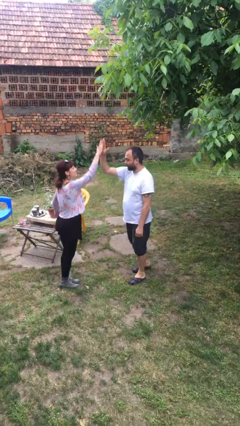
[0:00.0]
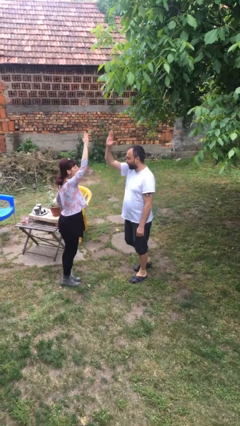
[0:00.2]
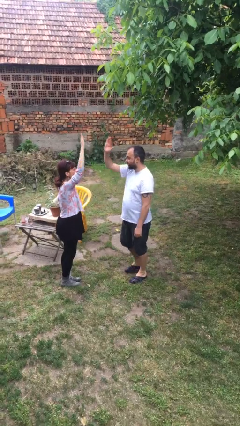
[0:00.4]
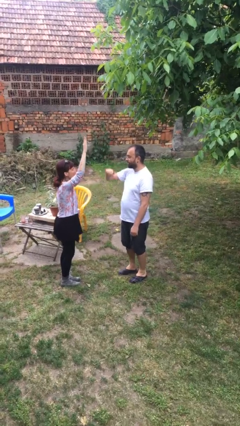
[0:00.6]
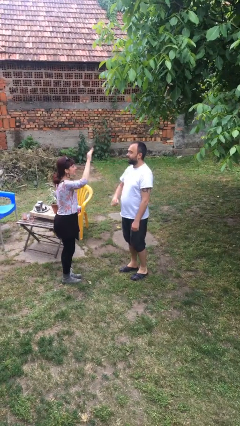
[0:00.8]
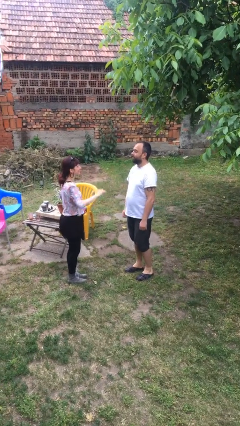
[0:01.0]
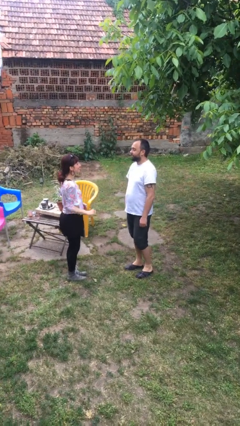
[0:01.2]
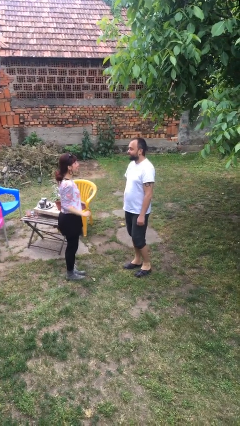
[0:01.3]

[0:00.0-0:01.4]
person highfives hand

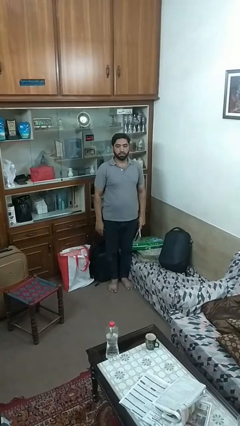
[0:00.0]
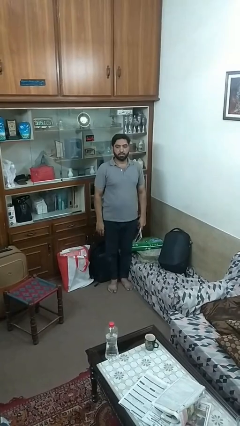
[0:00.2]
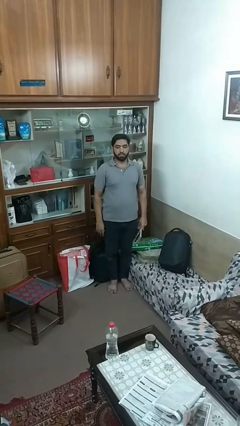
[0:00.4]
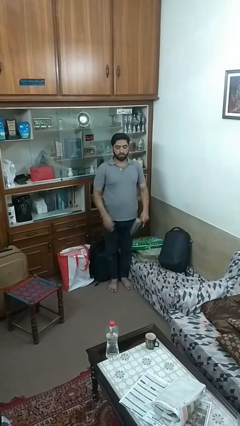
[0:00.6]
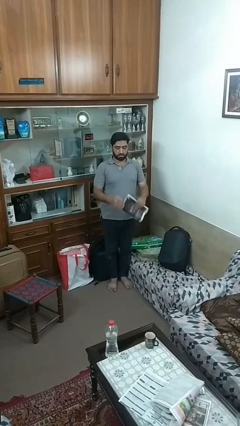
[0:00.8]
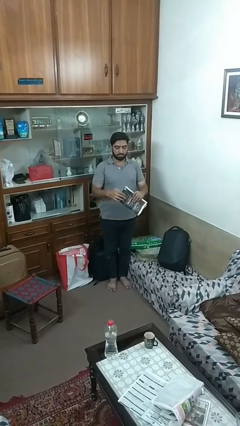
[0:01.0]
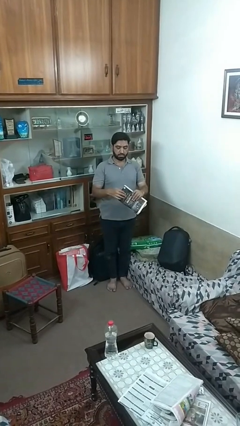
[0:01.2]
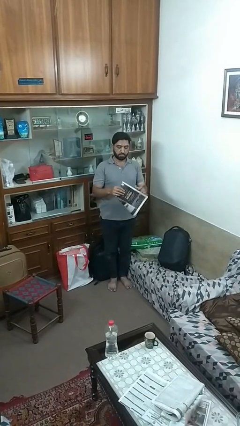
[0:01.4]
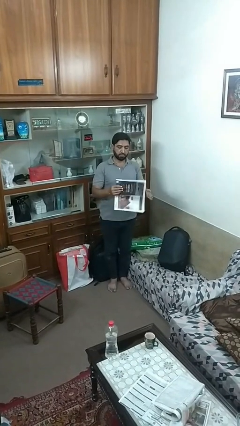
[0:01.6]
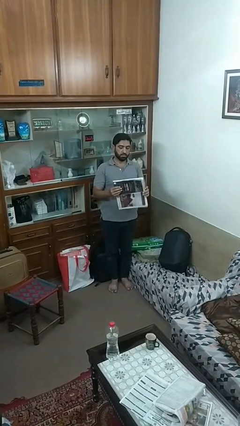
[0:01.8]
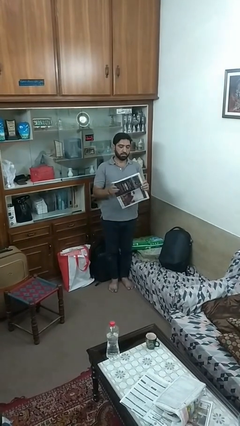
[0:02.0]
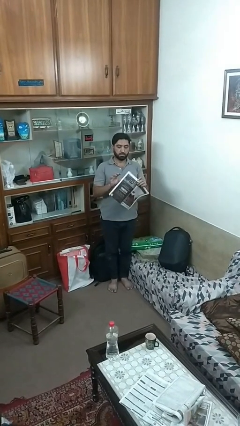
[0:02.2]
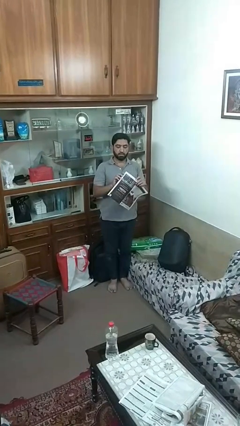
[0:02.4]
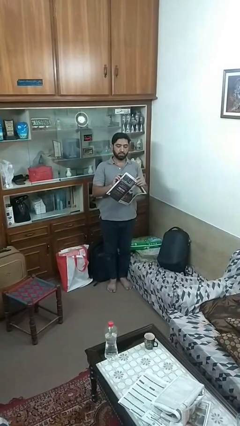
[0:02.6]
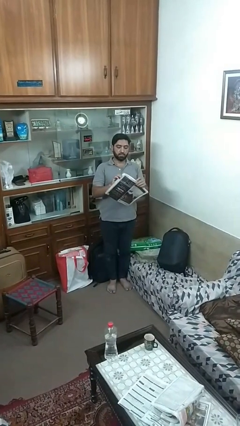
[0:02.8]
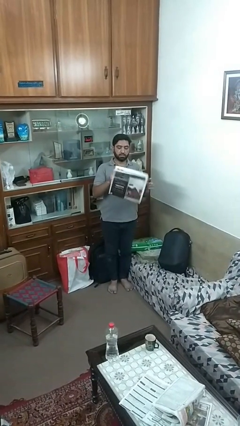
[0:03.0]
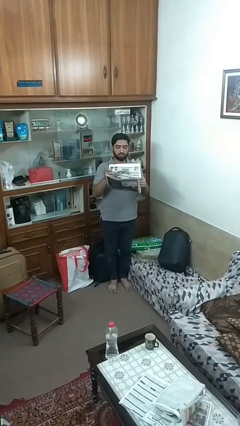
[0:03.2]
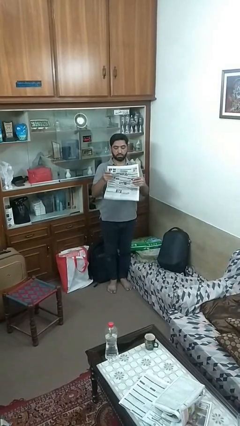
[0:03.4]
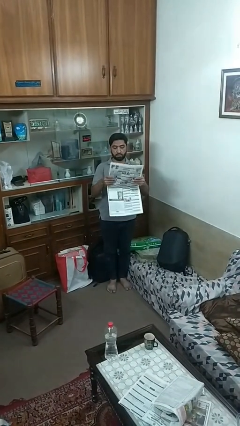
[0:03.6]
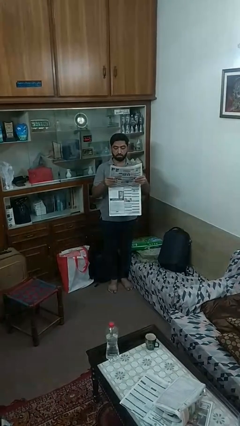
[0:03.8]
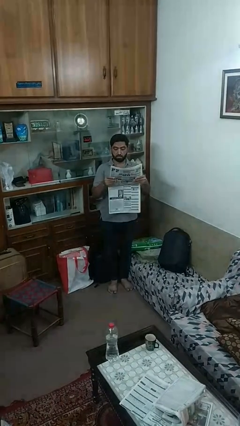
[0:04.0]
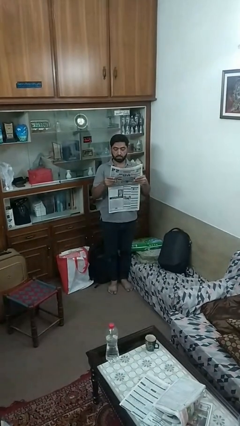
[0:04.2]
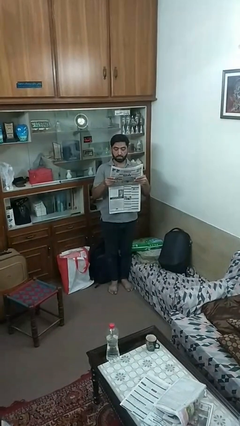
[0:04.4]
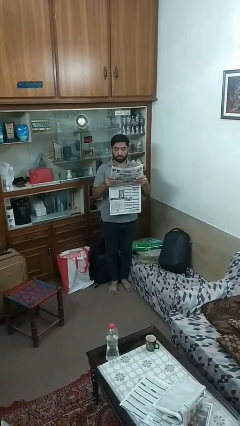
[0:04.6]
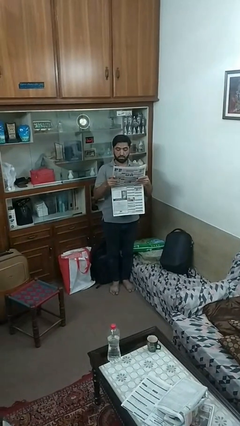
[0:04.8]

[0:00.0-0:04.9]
person reads newspaper

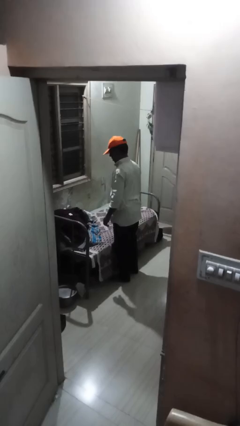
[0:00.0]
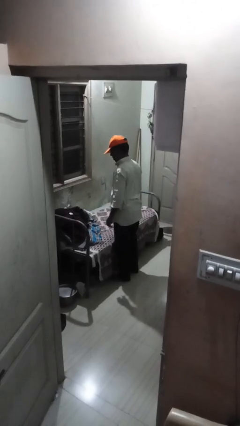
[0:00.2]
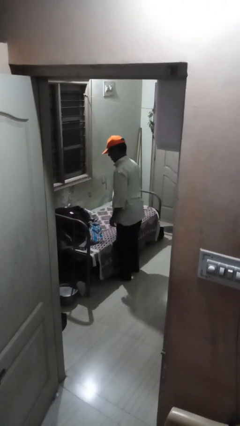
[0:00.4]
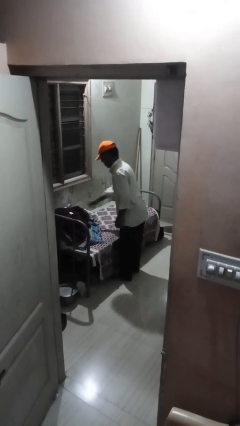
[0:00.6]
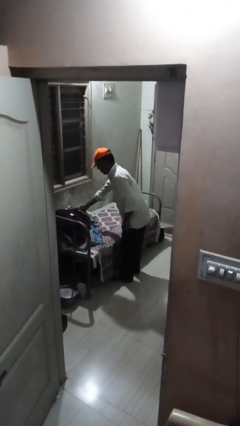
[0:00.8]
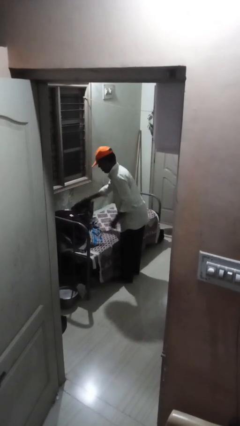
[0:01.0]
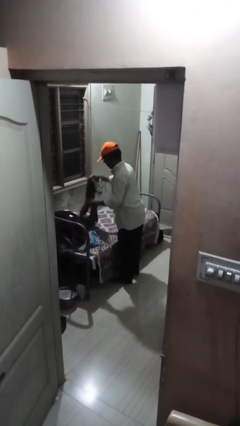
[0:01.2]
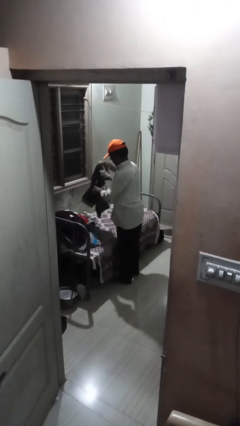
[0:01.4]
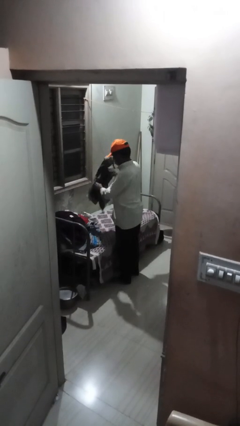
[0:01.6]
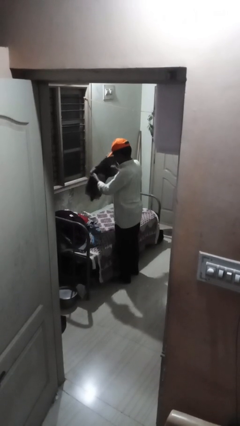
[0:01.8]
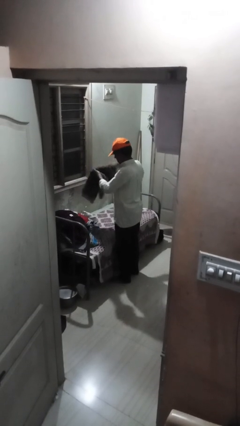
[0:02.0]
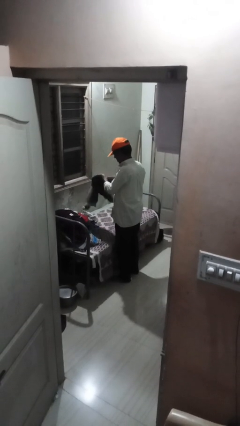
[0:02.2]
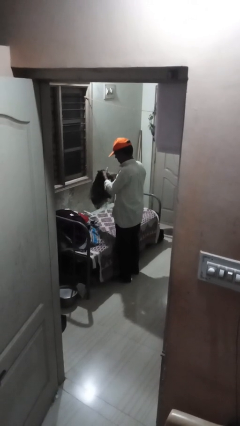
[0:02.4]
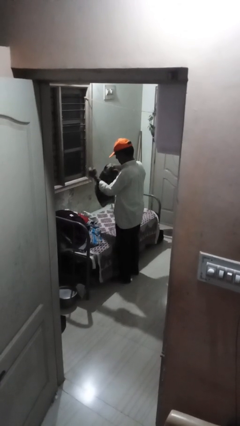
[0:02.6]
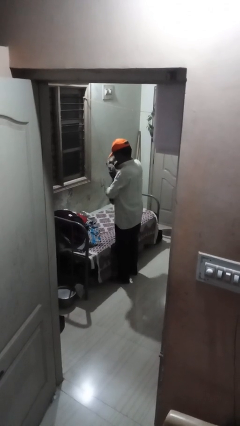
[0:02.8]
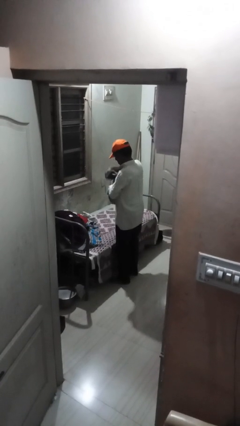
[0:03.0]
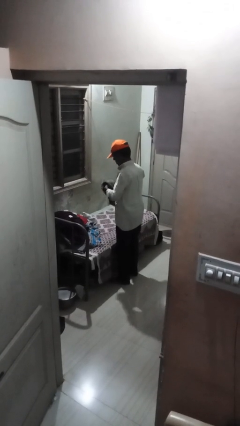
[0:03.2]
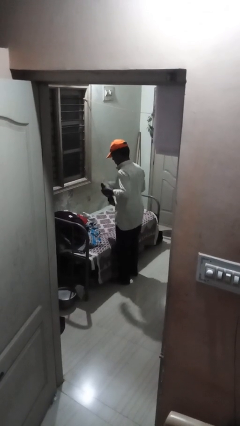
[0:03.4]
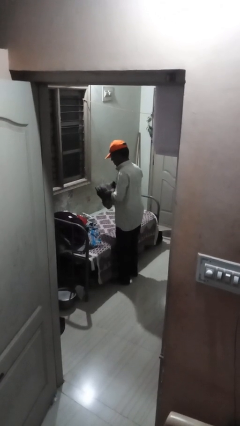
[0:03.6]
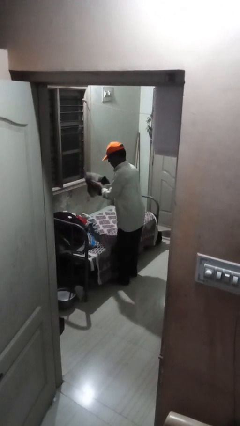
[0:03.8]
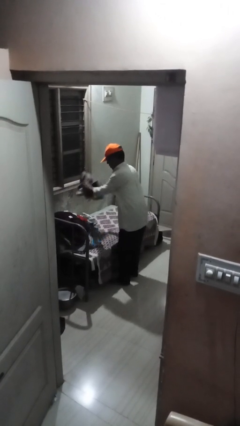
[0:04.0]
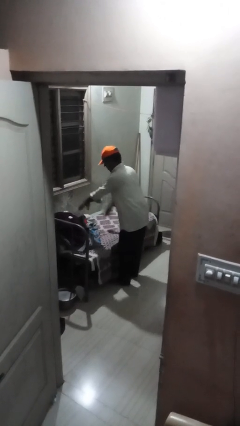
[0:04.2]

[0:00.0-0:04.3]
person folds pants

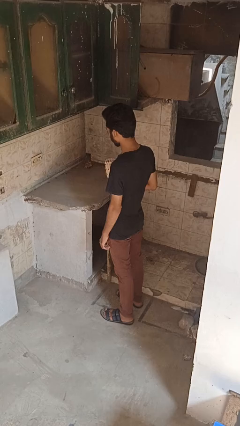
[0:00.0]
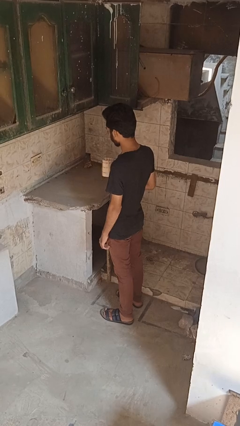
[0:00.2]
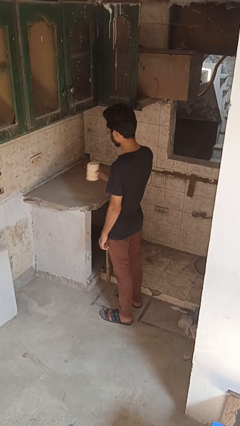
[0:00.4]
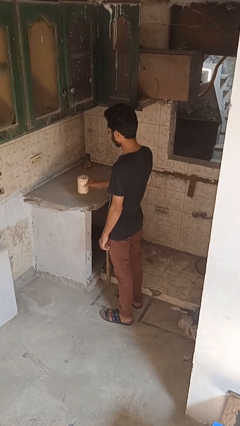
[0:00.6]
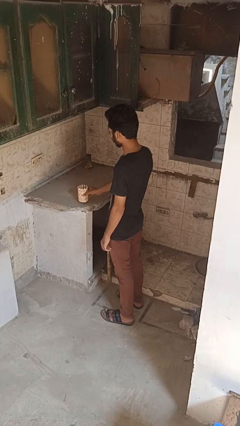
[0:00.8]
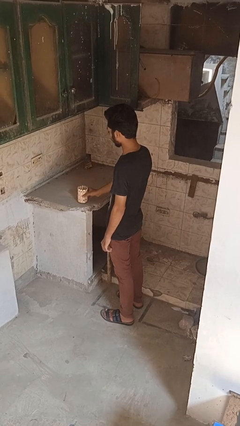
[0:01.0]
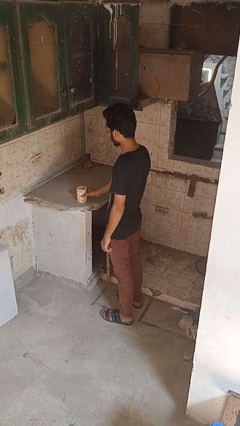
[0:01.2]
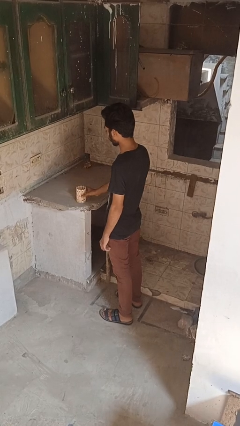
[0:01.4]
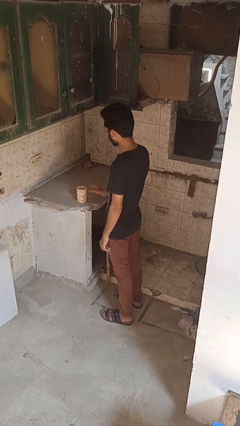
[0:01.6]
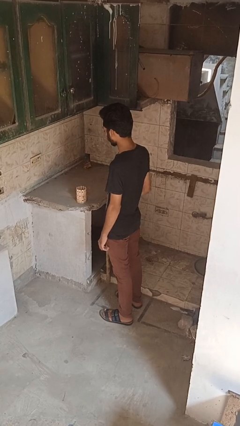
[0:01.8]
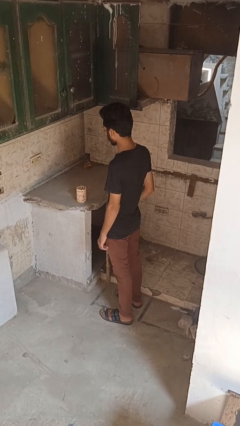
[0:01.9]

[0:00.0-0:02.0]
person puts down object on countertop

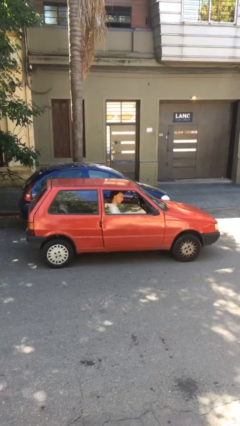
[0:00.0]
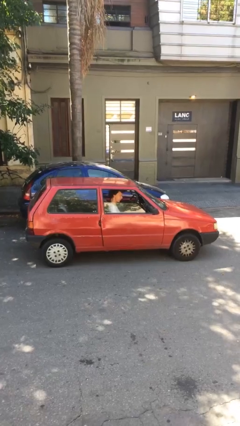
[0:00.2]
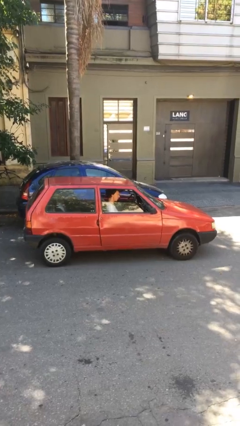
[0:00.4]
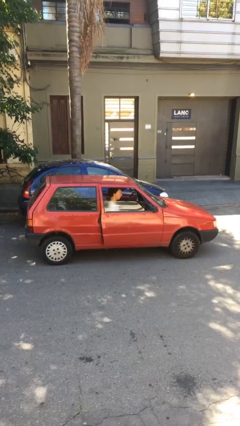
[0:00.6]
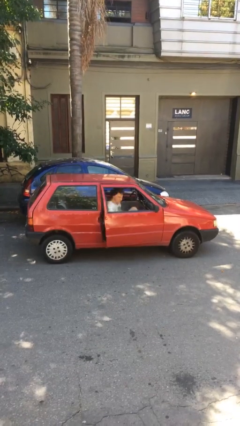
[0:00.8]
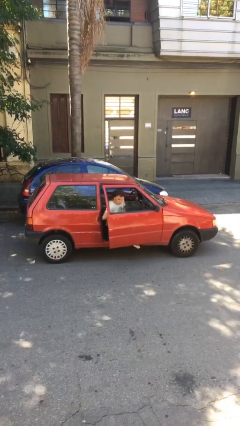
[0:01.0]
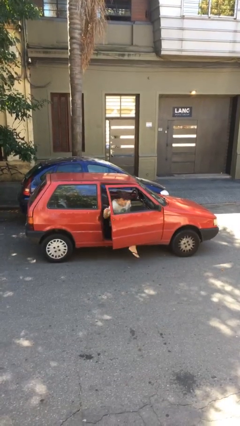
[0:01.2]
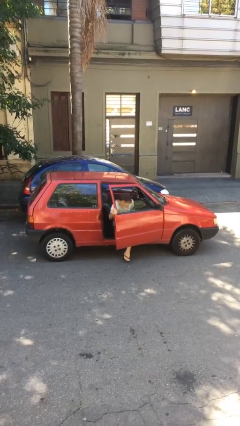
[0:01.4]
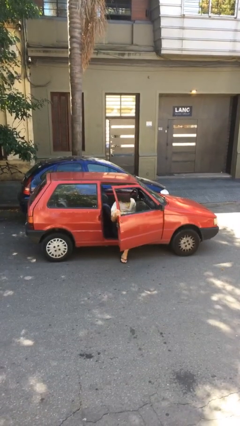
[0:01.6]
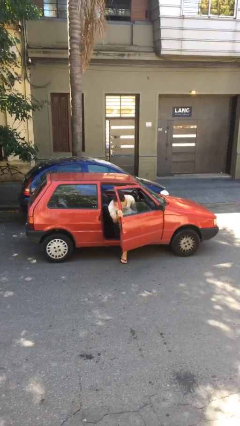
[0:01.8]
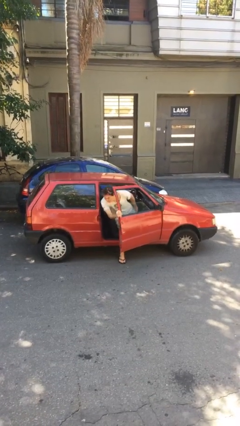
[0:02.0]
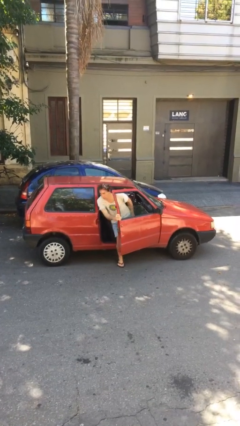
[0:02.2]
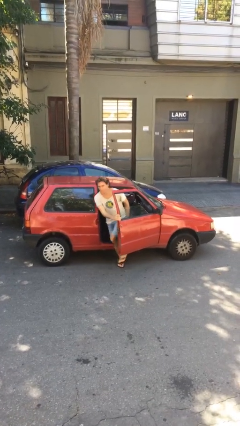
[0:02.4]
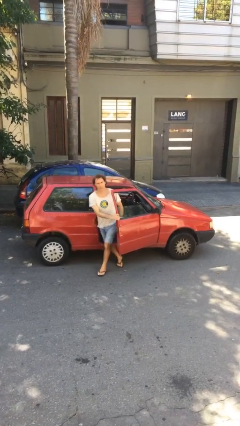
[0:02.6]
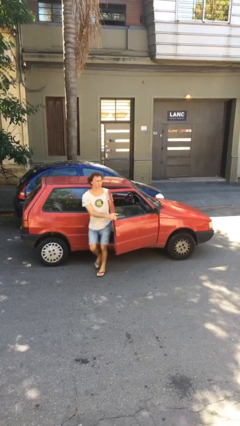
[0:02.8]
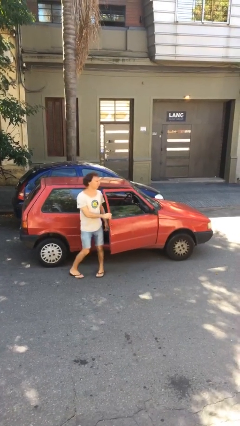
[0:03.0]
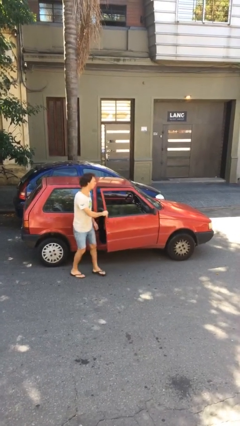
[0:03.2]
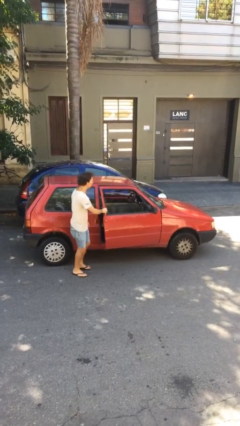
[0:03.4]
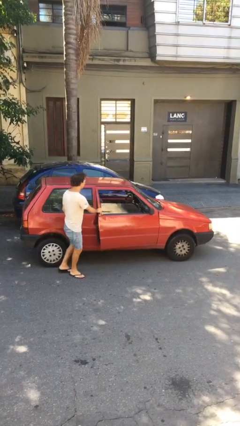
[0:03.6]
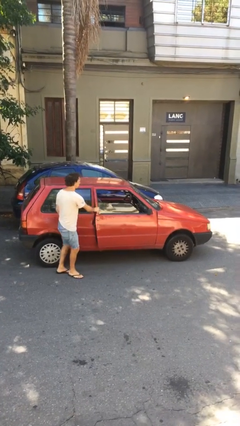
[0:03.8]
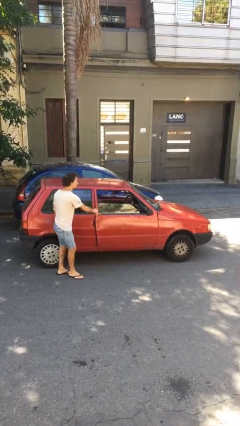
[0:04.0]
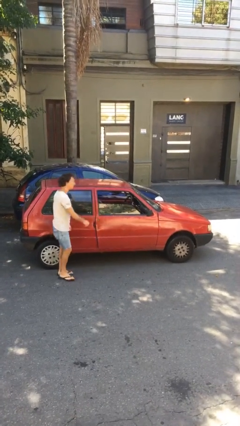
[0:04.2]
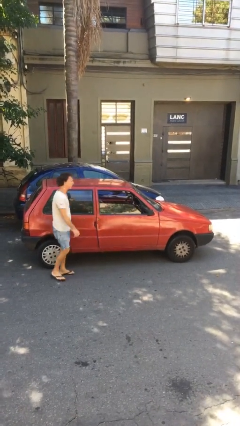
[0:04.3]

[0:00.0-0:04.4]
car drops off person

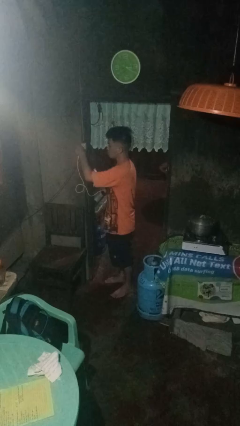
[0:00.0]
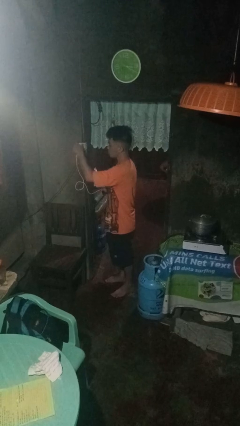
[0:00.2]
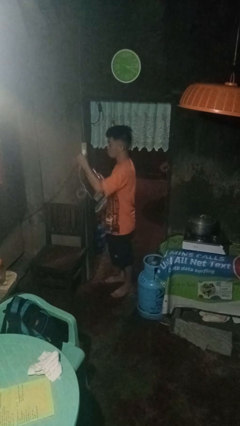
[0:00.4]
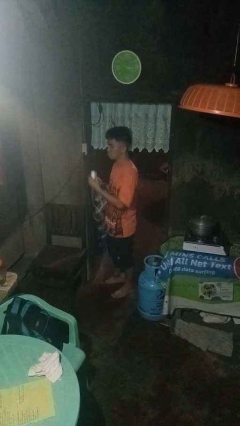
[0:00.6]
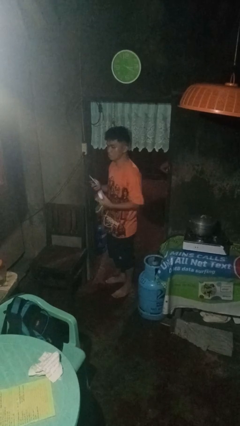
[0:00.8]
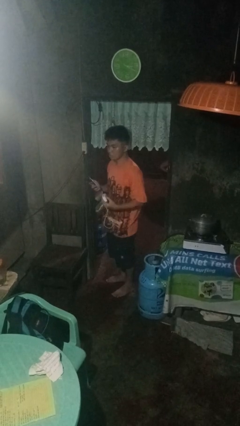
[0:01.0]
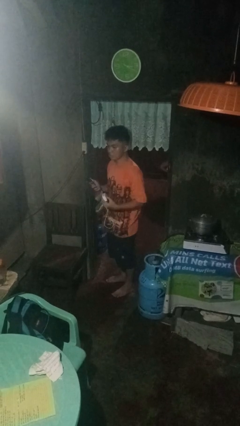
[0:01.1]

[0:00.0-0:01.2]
person unplugs from electrical socket
